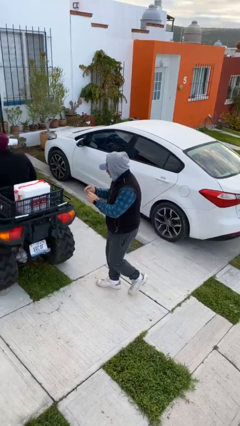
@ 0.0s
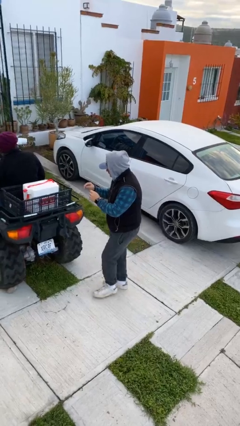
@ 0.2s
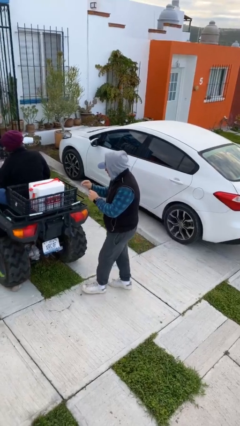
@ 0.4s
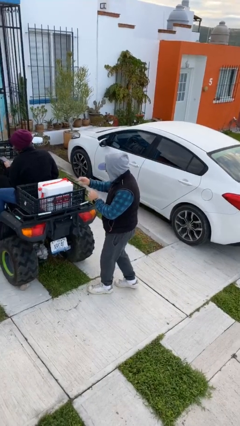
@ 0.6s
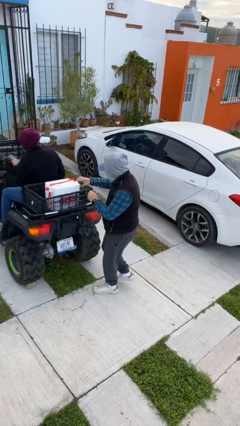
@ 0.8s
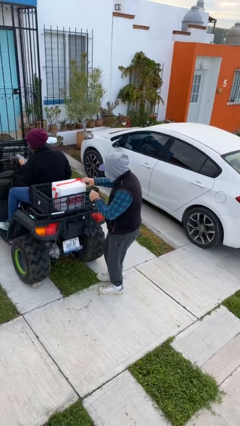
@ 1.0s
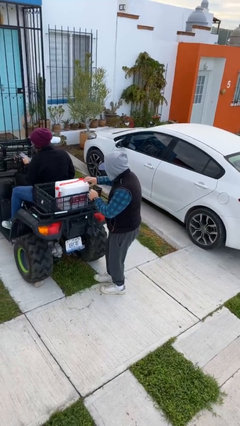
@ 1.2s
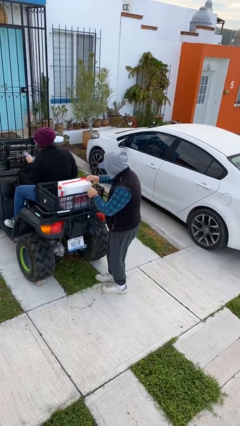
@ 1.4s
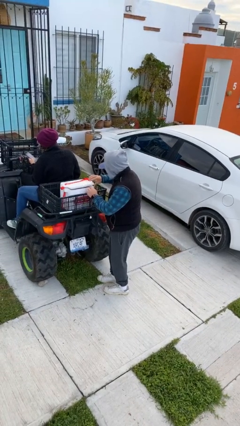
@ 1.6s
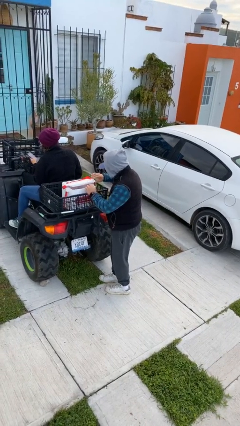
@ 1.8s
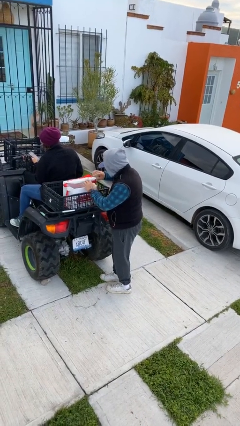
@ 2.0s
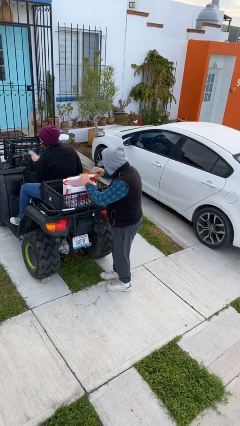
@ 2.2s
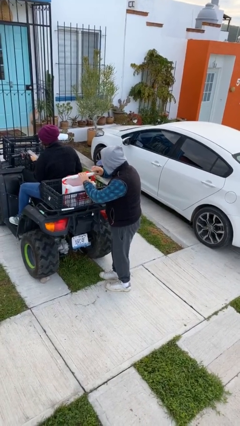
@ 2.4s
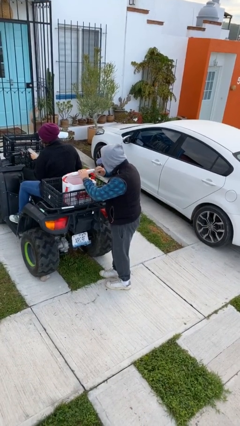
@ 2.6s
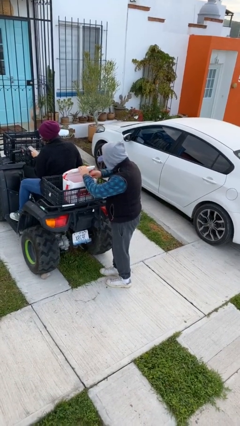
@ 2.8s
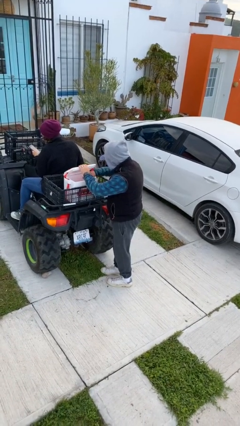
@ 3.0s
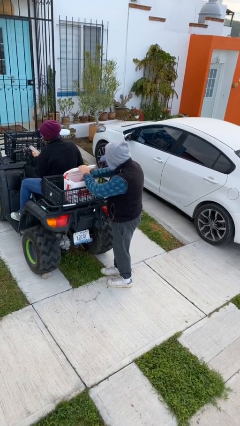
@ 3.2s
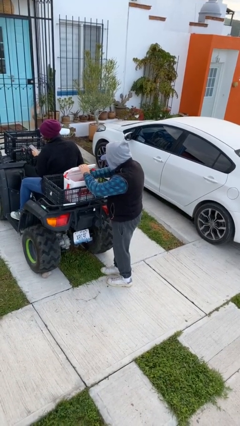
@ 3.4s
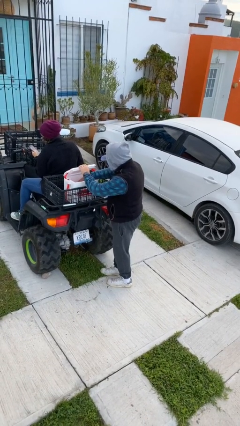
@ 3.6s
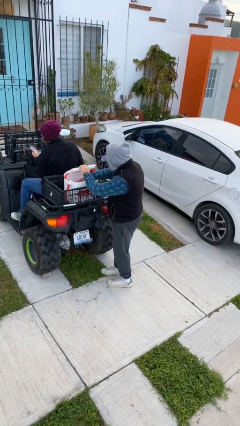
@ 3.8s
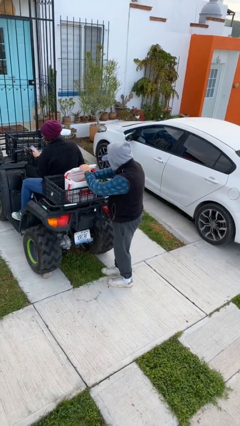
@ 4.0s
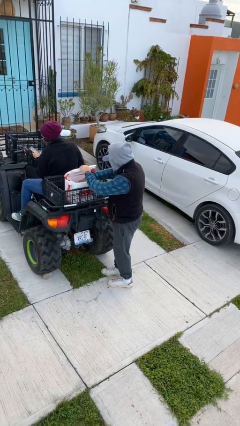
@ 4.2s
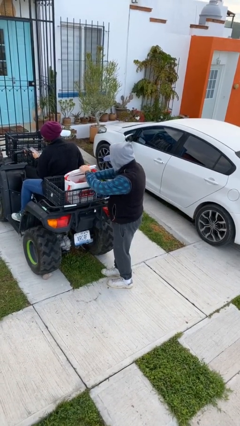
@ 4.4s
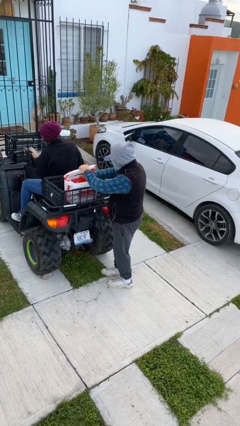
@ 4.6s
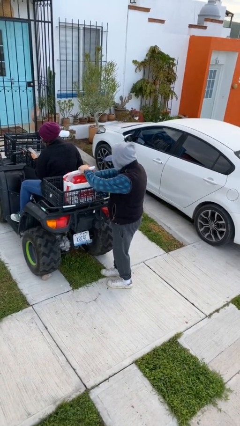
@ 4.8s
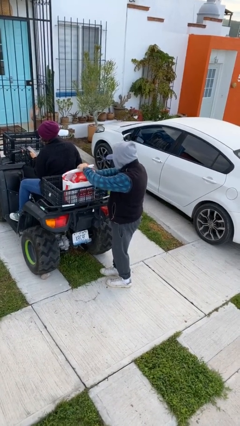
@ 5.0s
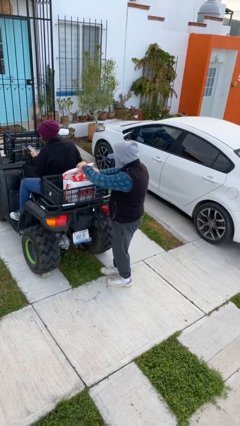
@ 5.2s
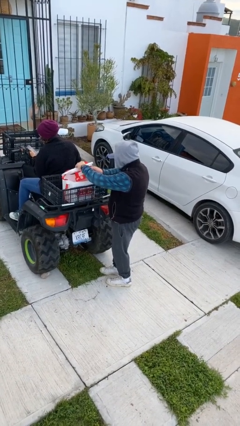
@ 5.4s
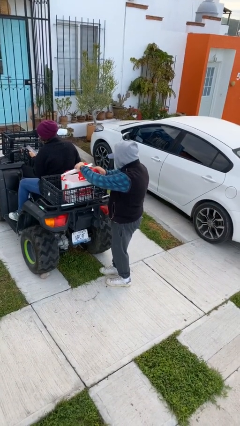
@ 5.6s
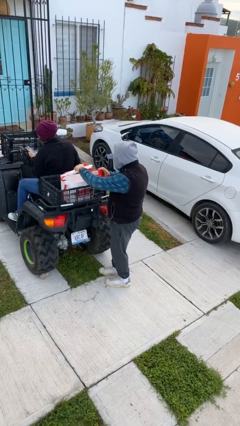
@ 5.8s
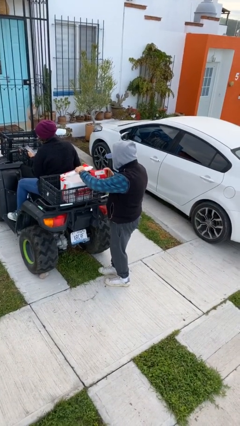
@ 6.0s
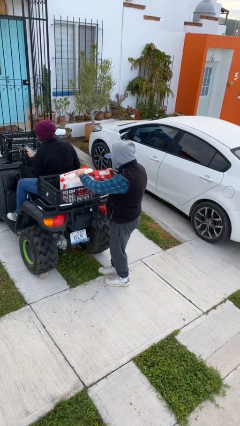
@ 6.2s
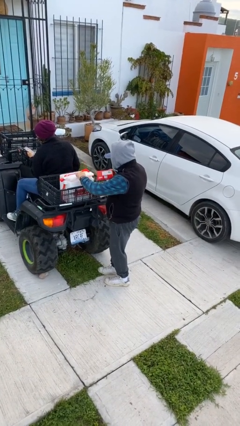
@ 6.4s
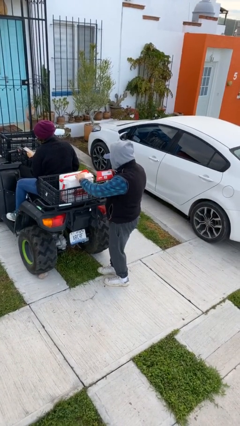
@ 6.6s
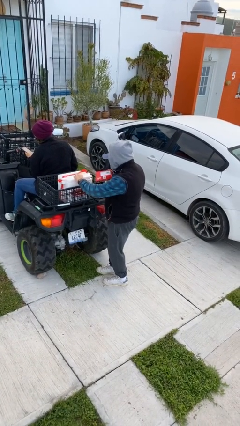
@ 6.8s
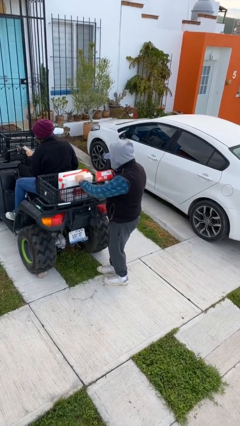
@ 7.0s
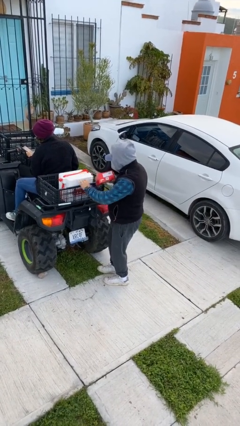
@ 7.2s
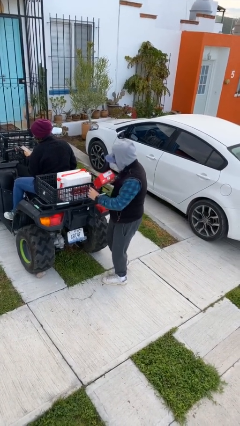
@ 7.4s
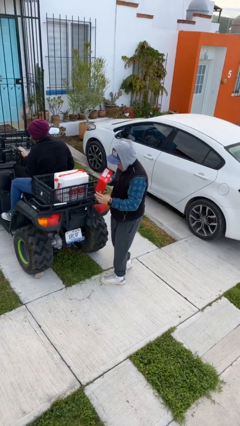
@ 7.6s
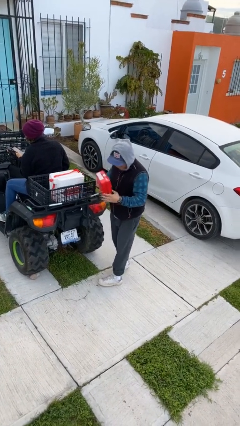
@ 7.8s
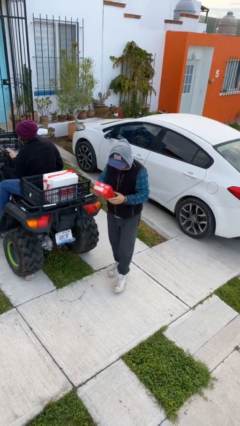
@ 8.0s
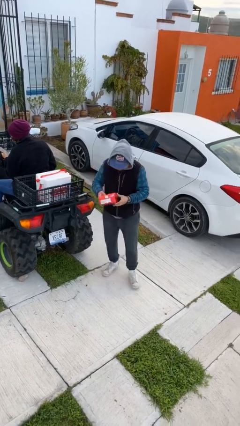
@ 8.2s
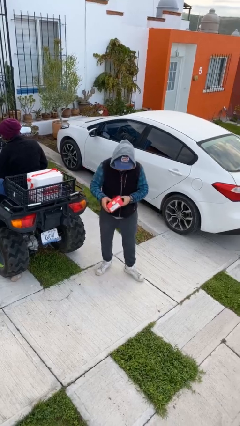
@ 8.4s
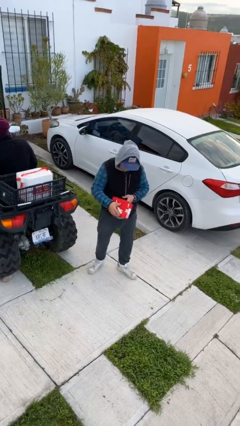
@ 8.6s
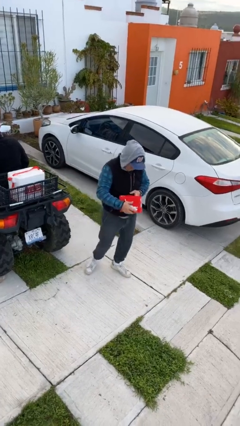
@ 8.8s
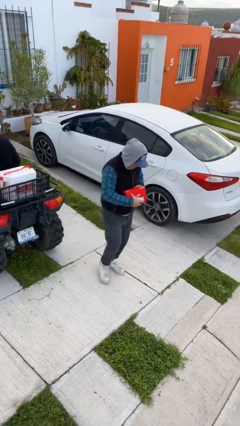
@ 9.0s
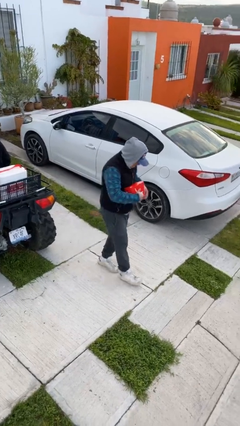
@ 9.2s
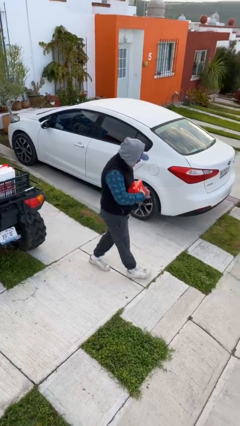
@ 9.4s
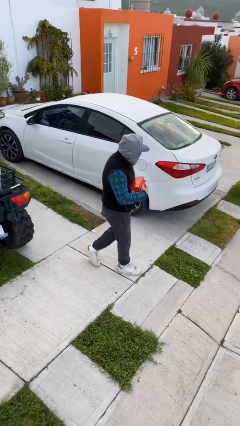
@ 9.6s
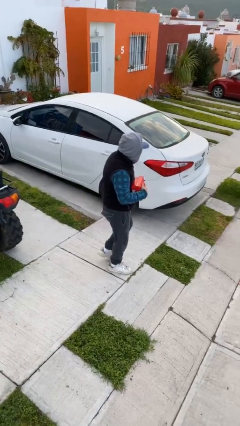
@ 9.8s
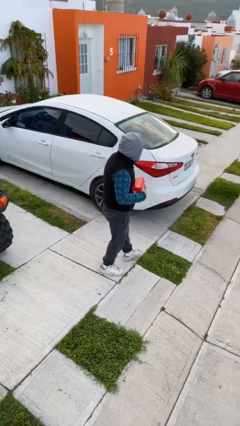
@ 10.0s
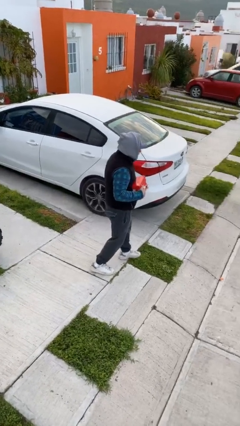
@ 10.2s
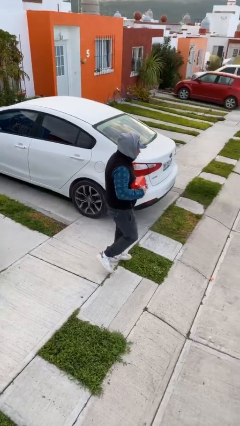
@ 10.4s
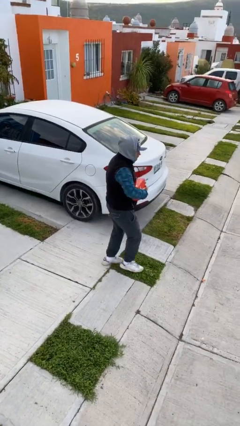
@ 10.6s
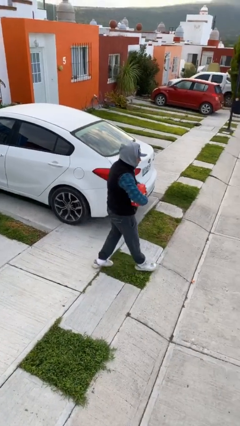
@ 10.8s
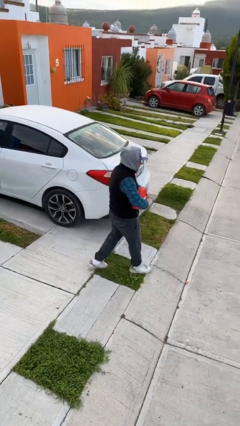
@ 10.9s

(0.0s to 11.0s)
person steals object from person

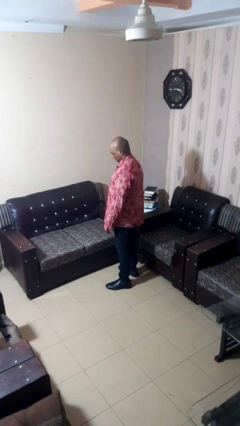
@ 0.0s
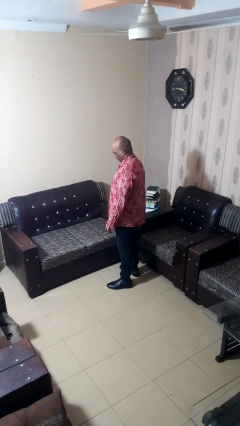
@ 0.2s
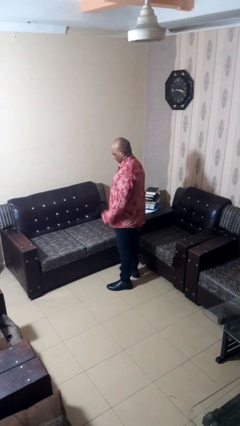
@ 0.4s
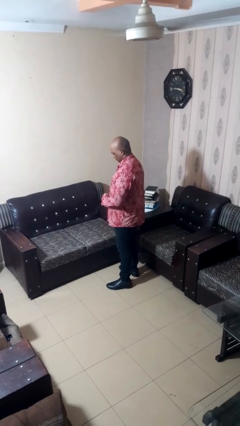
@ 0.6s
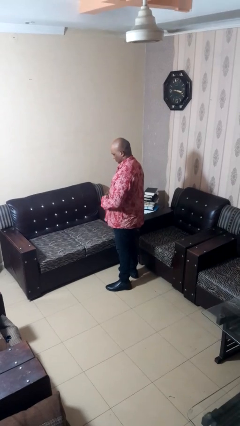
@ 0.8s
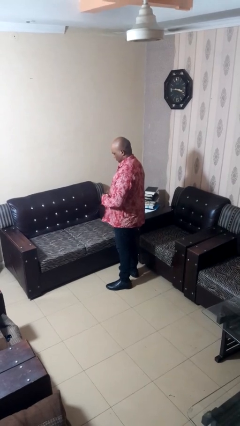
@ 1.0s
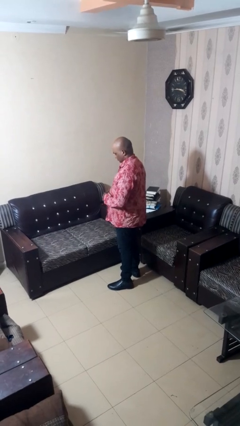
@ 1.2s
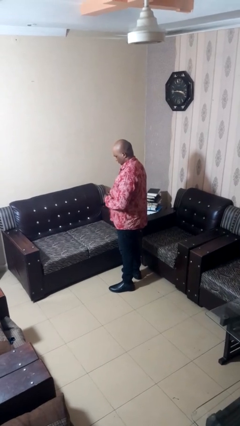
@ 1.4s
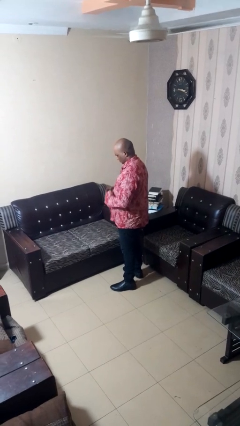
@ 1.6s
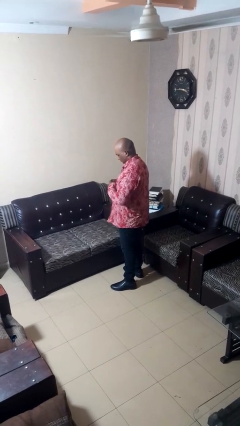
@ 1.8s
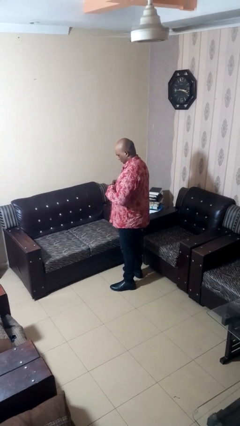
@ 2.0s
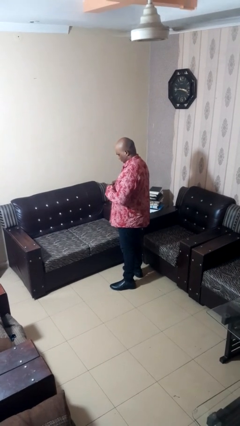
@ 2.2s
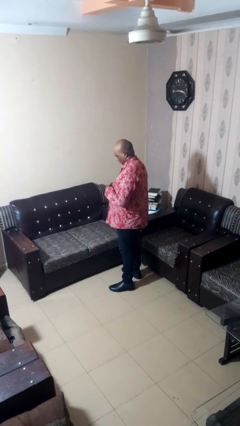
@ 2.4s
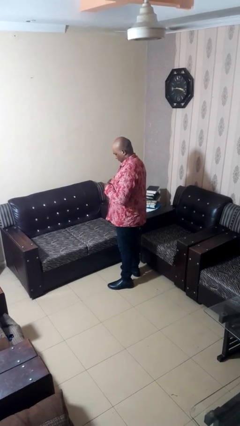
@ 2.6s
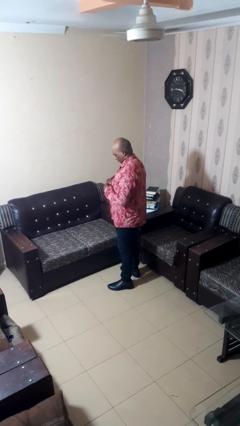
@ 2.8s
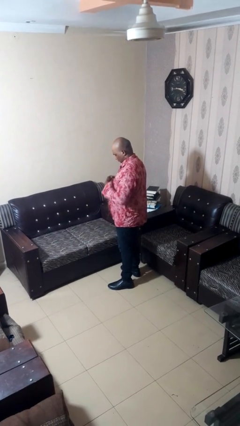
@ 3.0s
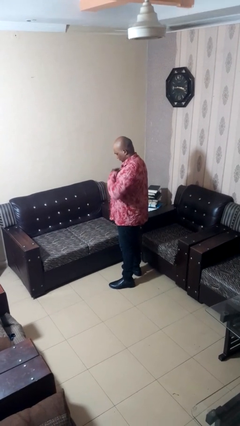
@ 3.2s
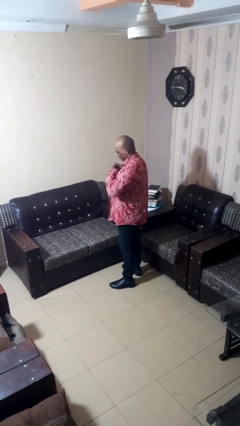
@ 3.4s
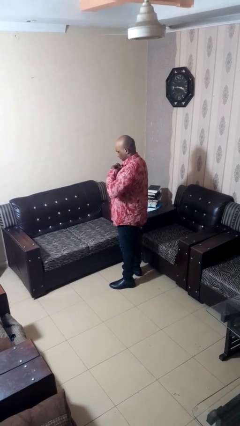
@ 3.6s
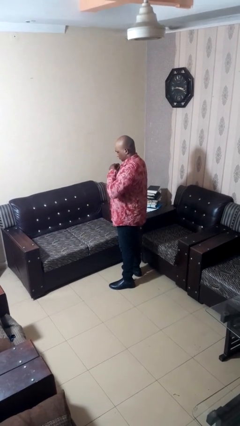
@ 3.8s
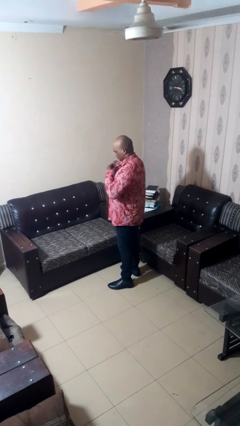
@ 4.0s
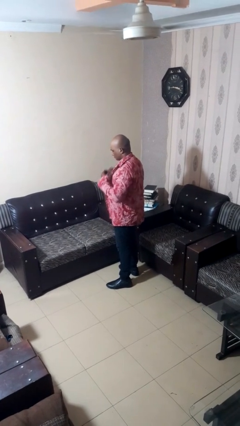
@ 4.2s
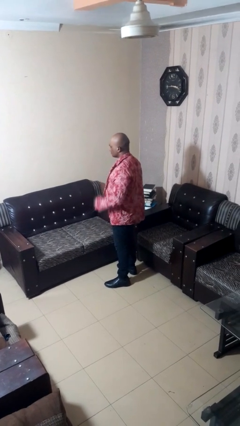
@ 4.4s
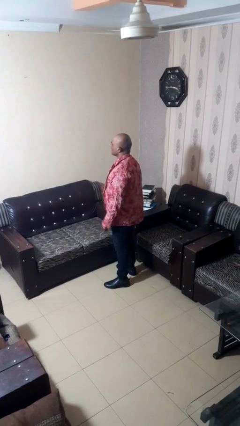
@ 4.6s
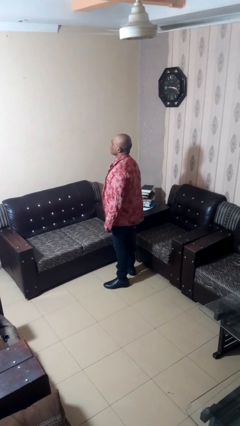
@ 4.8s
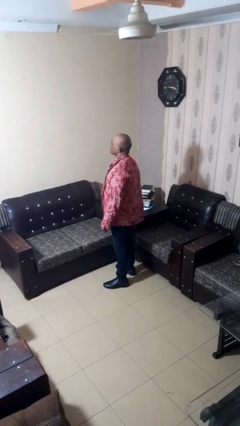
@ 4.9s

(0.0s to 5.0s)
person unbuttons shirt

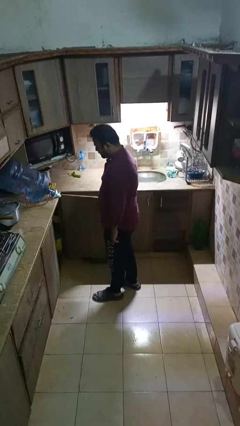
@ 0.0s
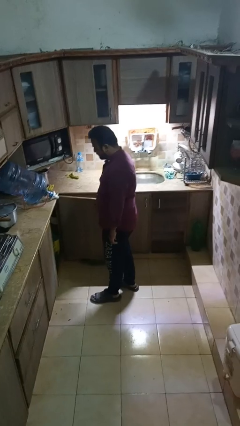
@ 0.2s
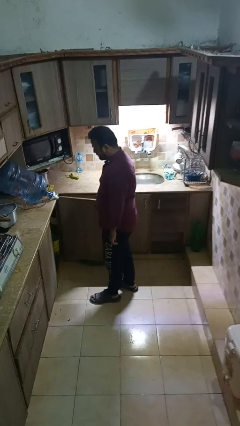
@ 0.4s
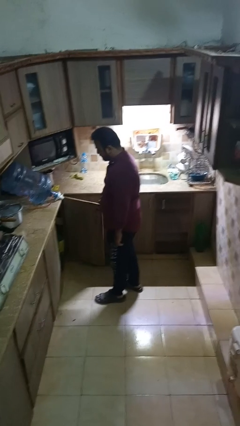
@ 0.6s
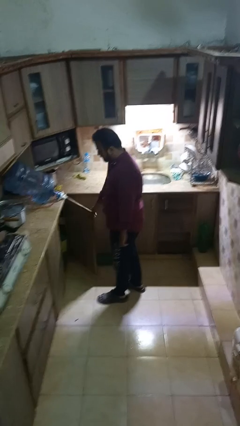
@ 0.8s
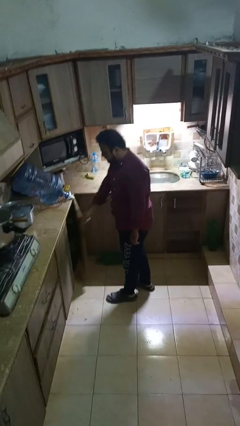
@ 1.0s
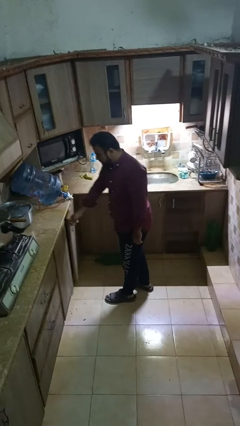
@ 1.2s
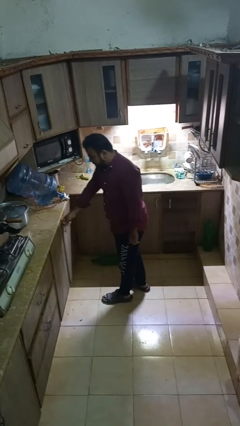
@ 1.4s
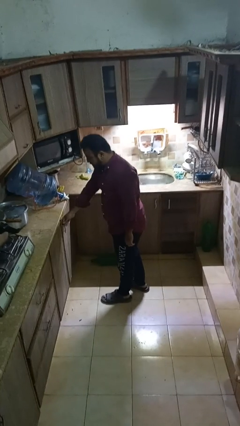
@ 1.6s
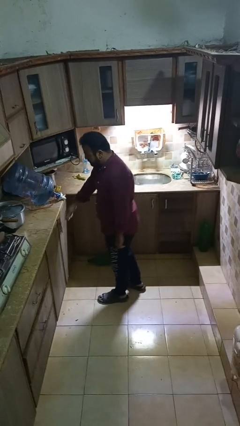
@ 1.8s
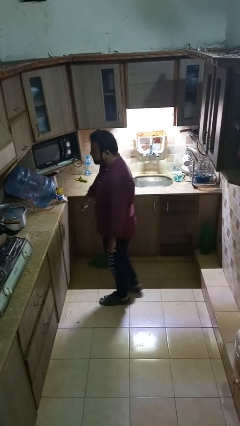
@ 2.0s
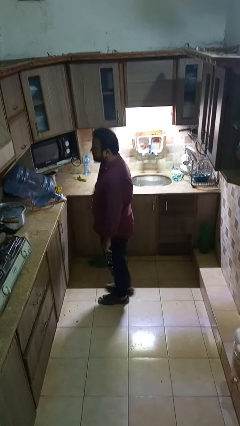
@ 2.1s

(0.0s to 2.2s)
person closes cabinet
